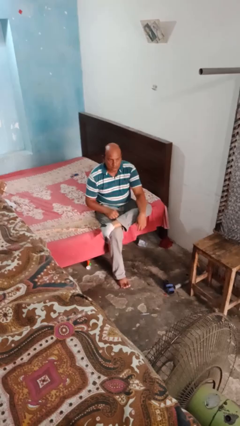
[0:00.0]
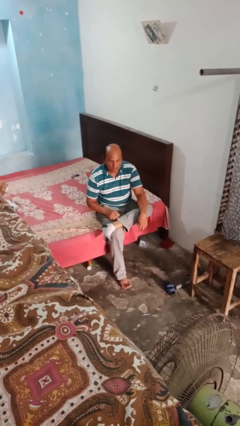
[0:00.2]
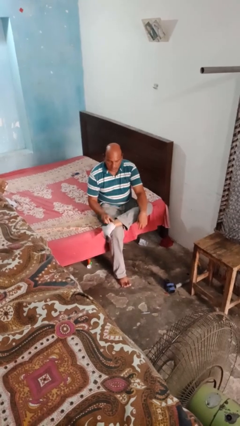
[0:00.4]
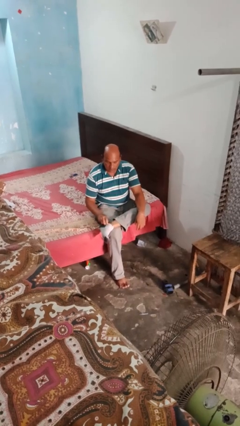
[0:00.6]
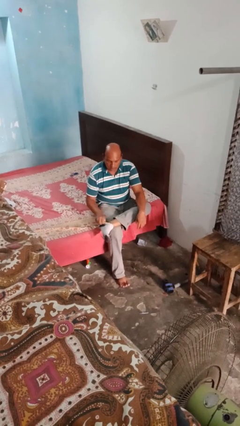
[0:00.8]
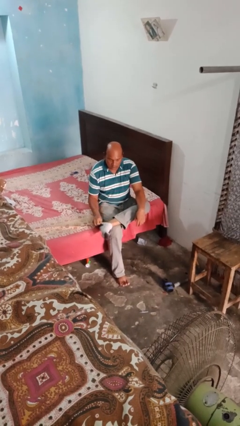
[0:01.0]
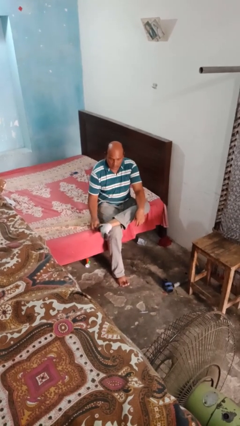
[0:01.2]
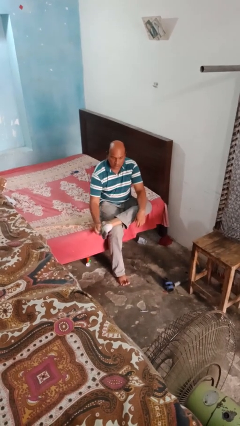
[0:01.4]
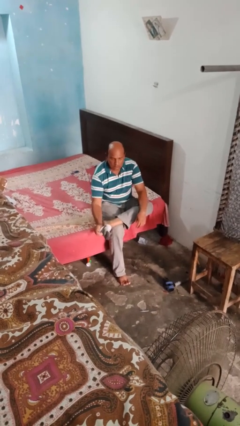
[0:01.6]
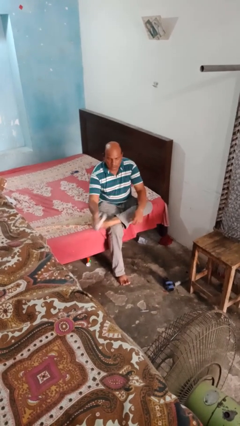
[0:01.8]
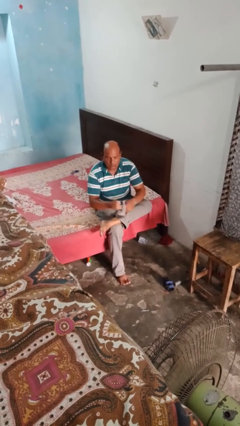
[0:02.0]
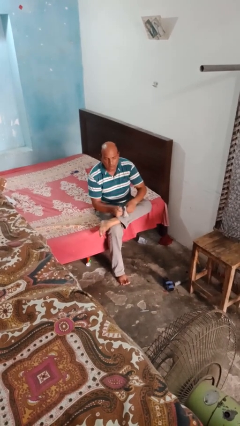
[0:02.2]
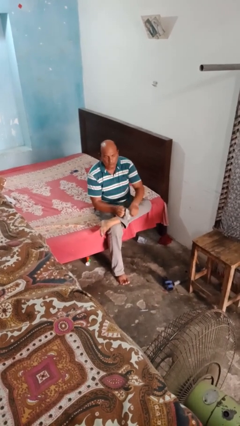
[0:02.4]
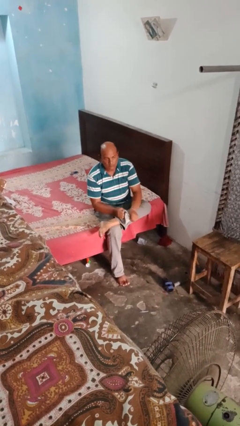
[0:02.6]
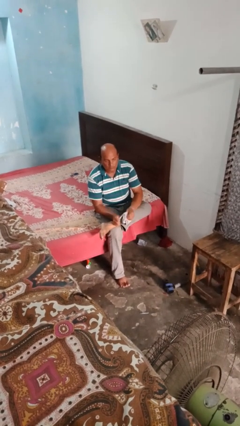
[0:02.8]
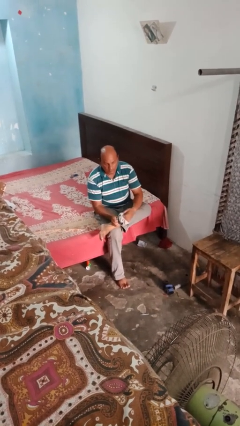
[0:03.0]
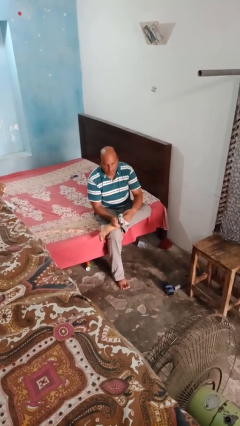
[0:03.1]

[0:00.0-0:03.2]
person takes off socks

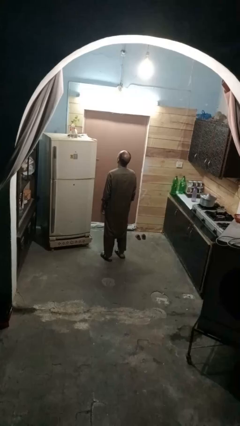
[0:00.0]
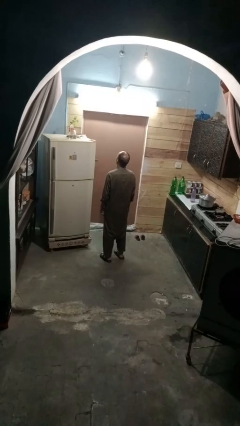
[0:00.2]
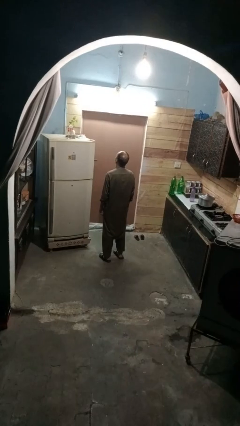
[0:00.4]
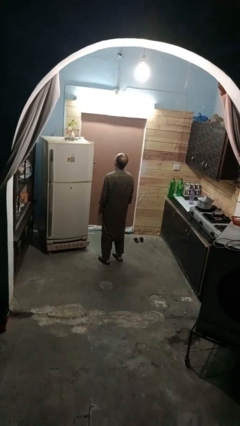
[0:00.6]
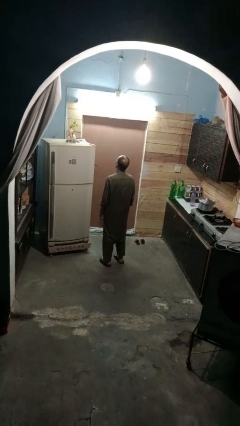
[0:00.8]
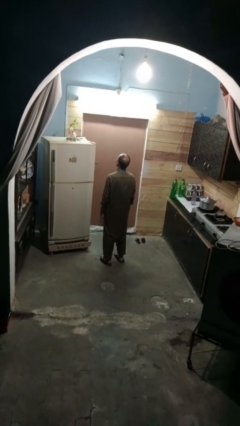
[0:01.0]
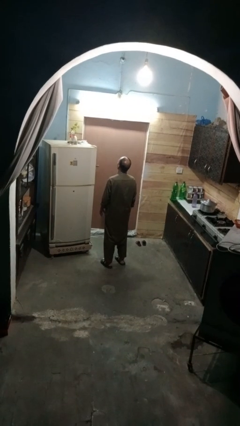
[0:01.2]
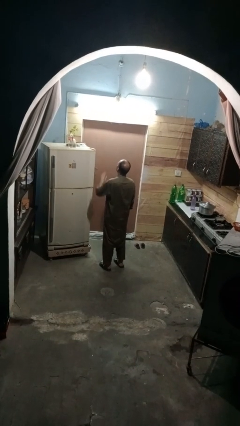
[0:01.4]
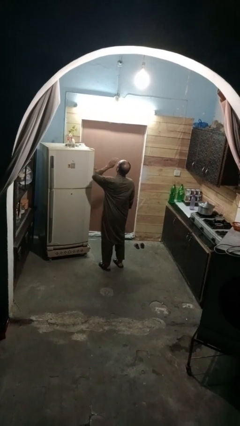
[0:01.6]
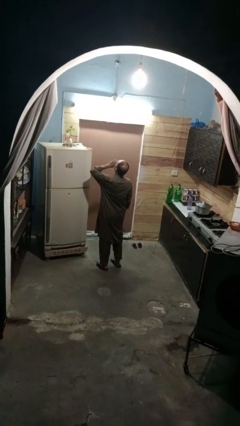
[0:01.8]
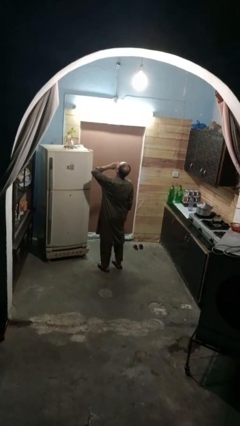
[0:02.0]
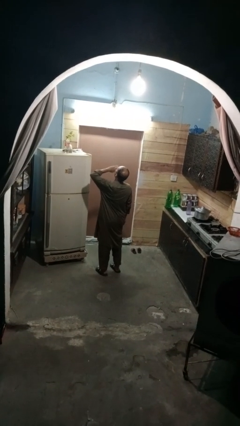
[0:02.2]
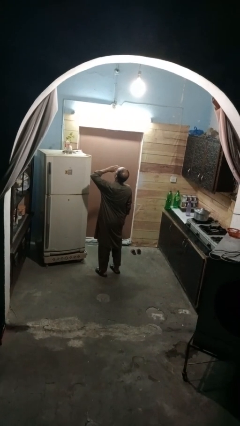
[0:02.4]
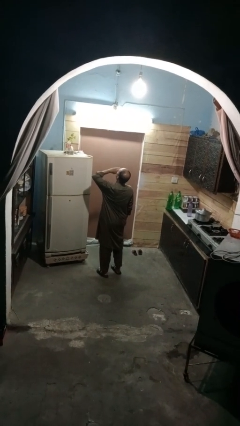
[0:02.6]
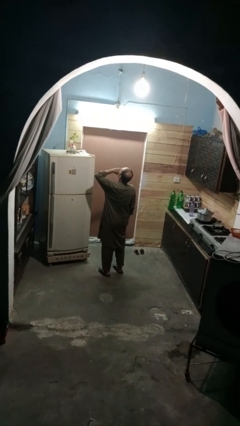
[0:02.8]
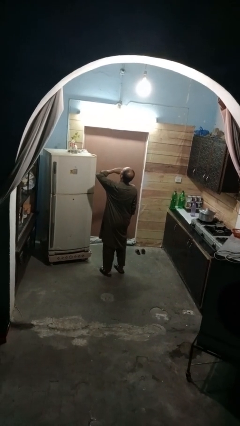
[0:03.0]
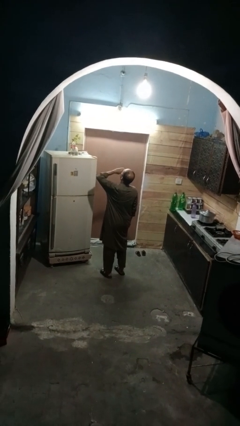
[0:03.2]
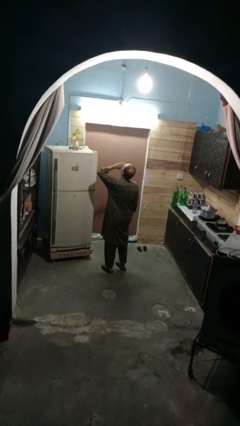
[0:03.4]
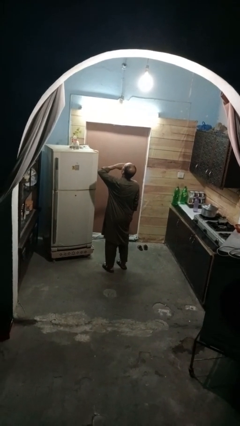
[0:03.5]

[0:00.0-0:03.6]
person yawns

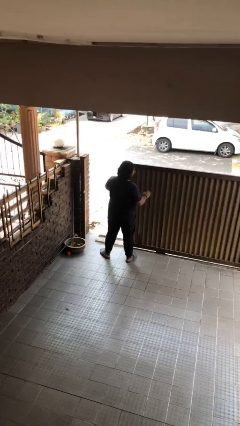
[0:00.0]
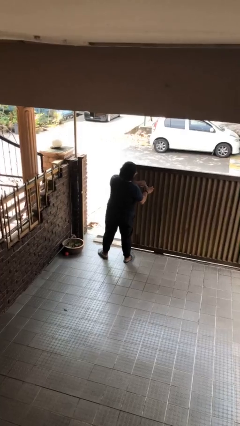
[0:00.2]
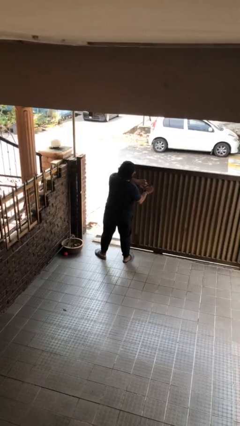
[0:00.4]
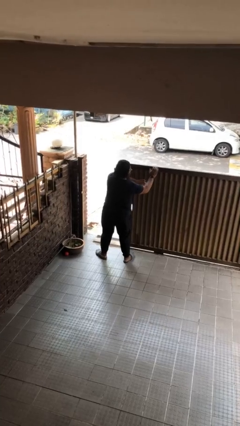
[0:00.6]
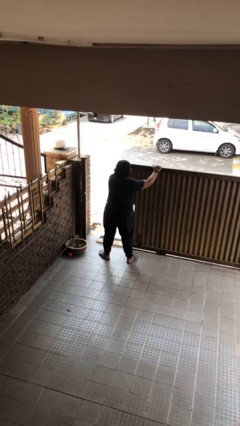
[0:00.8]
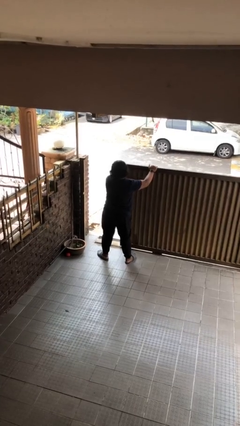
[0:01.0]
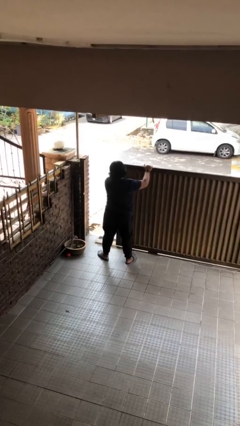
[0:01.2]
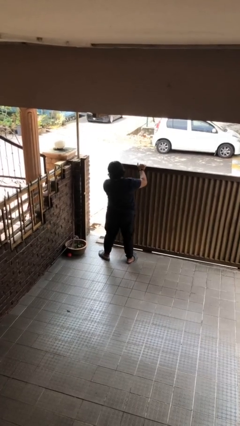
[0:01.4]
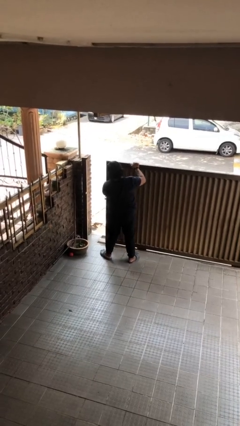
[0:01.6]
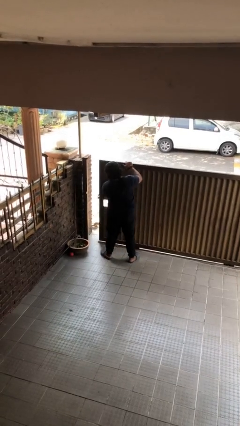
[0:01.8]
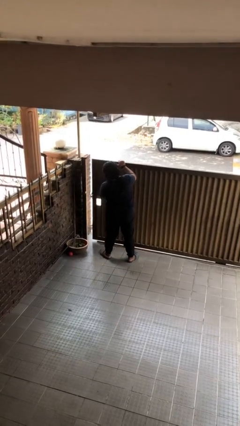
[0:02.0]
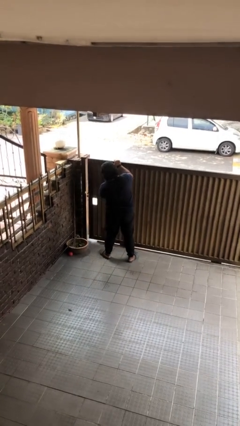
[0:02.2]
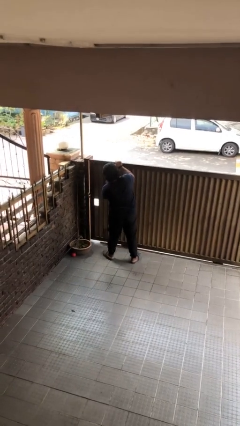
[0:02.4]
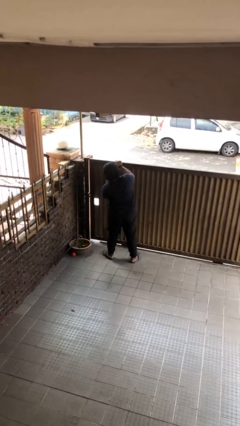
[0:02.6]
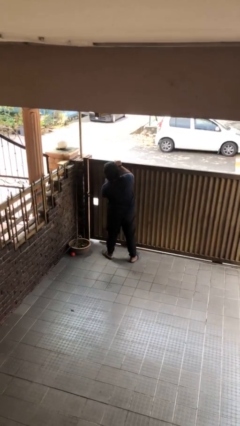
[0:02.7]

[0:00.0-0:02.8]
person closes facility door

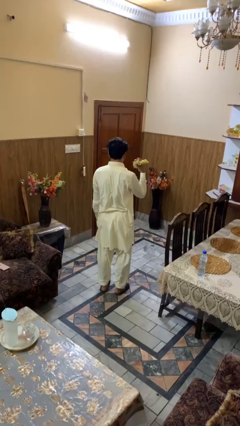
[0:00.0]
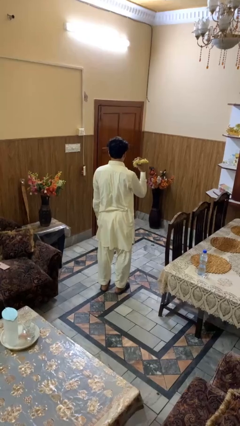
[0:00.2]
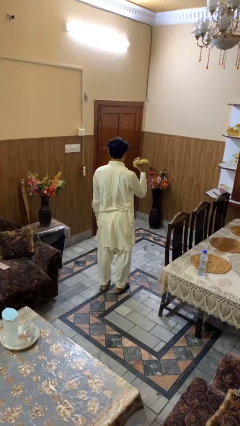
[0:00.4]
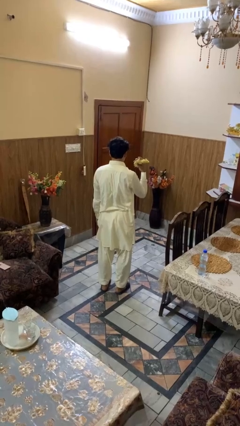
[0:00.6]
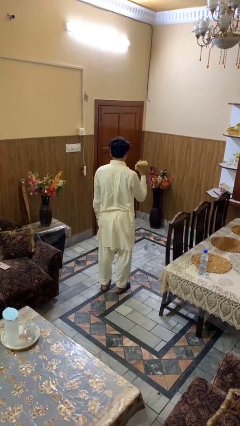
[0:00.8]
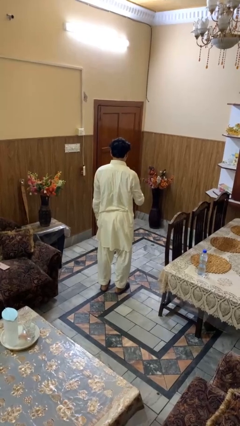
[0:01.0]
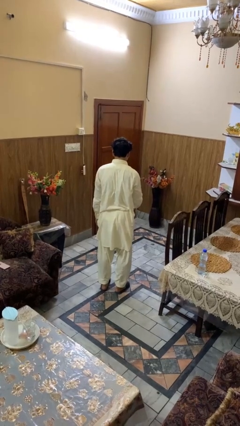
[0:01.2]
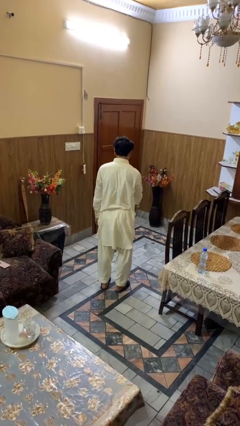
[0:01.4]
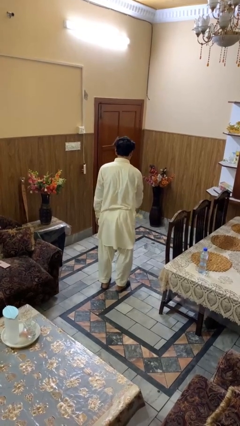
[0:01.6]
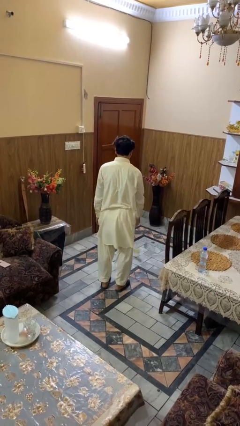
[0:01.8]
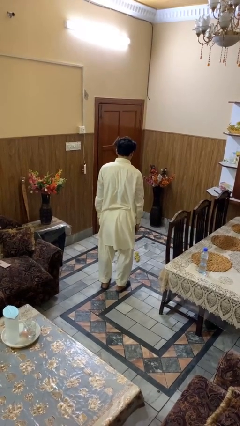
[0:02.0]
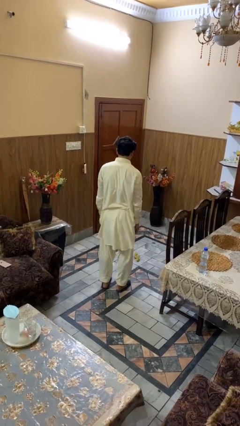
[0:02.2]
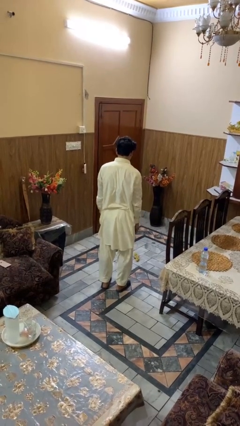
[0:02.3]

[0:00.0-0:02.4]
person throws object to ground

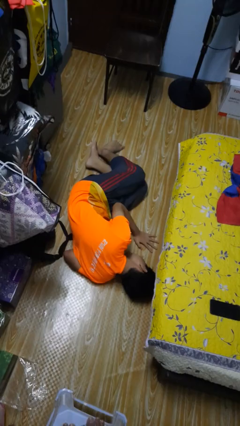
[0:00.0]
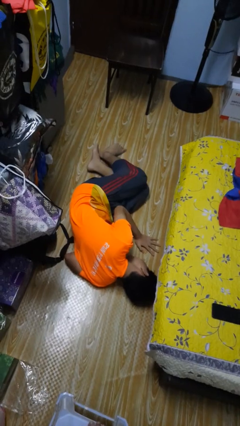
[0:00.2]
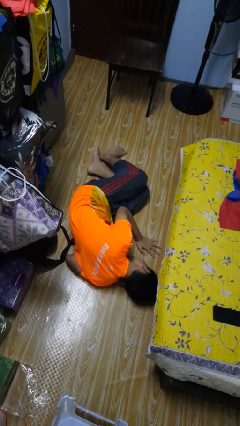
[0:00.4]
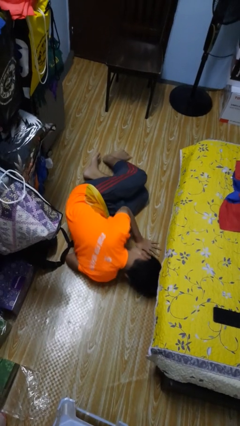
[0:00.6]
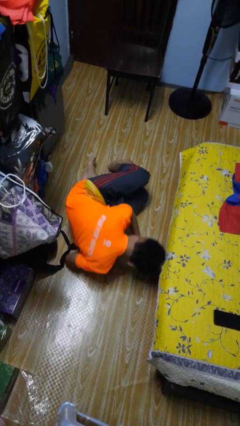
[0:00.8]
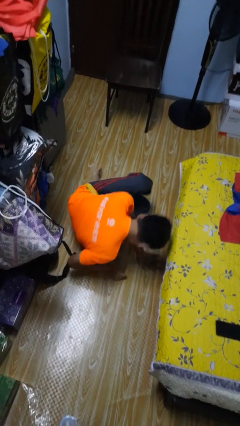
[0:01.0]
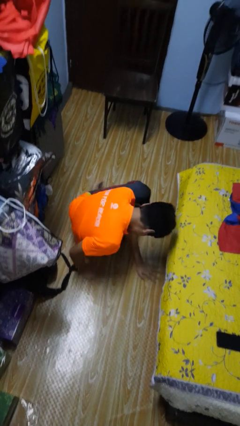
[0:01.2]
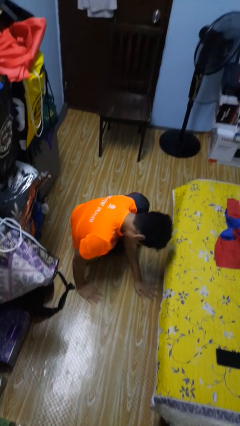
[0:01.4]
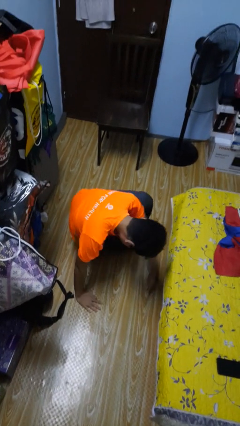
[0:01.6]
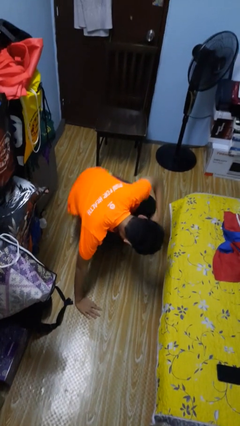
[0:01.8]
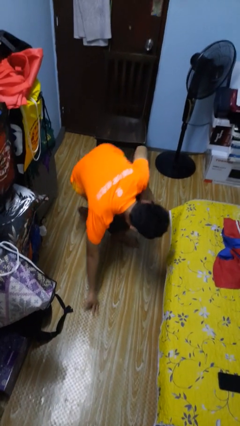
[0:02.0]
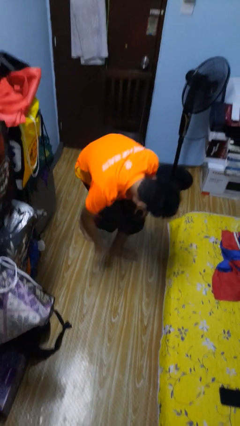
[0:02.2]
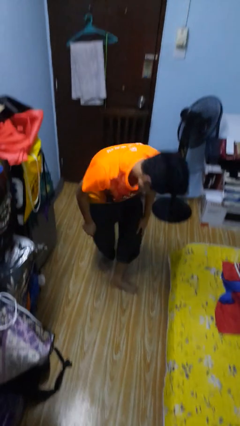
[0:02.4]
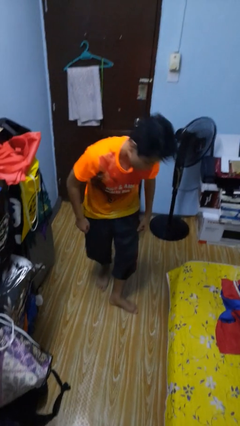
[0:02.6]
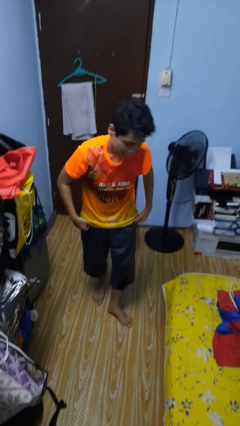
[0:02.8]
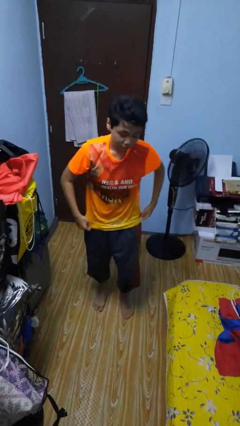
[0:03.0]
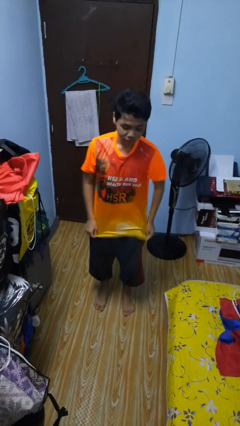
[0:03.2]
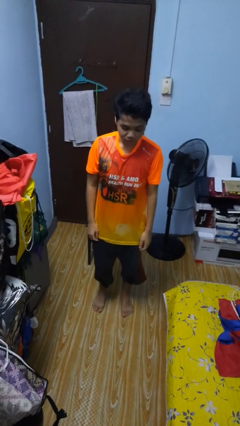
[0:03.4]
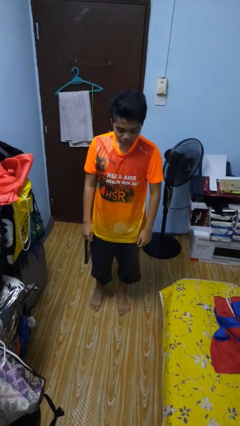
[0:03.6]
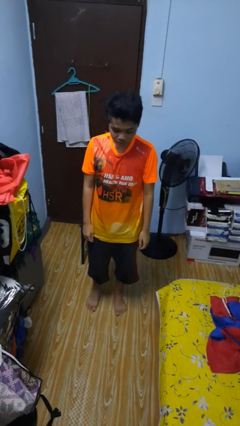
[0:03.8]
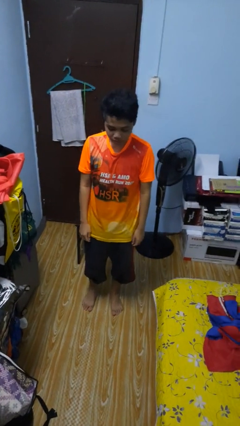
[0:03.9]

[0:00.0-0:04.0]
person stands up from floor

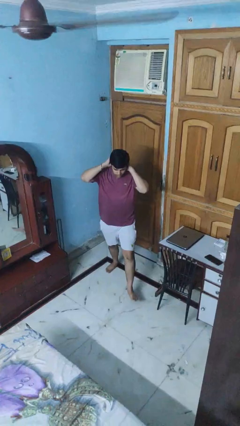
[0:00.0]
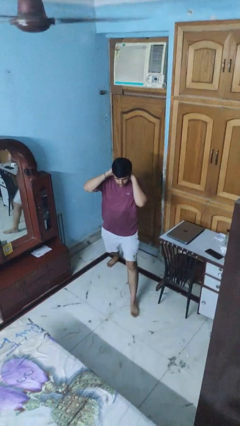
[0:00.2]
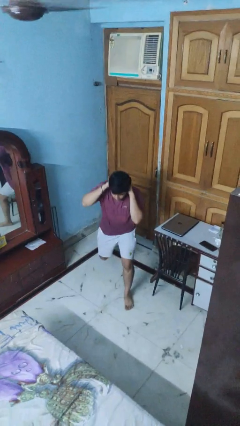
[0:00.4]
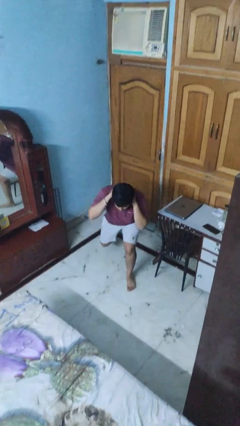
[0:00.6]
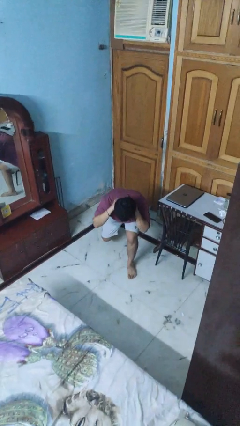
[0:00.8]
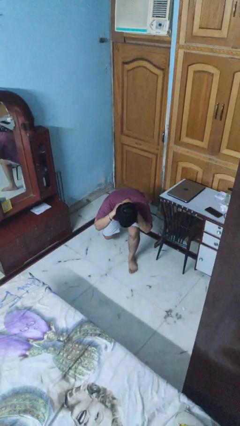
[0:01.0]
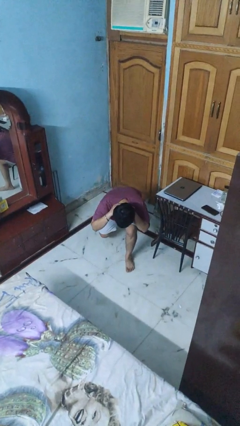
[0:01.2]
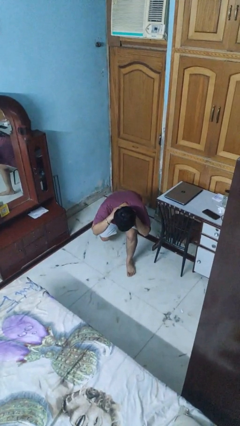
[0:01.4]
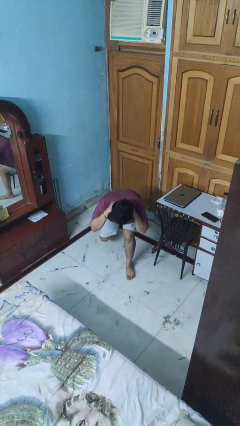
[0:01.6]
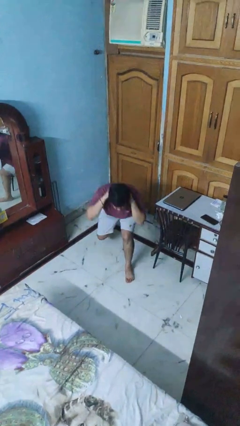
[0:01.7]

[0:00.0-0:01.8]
person exercises with lunges
